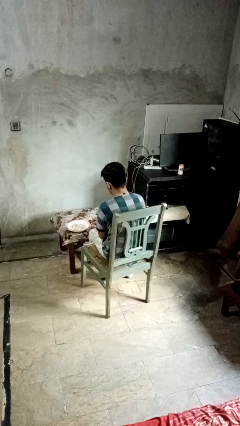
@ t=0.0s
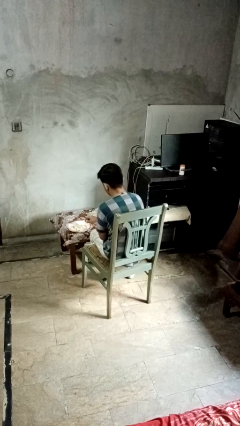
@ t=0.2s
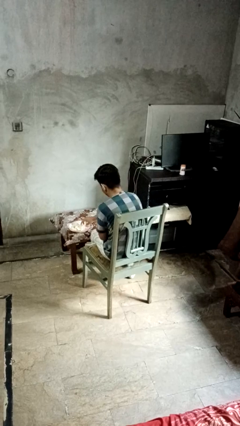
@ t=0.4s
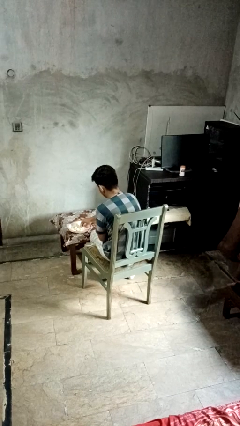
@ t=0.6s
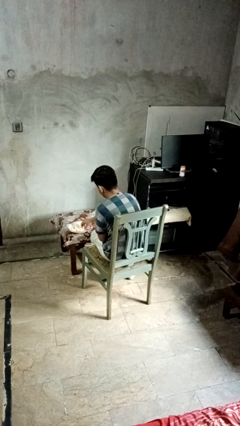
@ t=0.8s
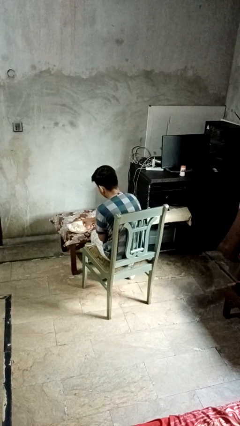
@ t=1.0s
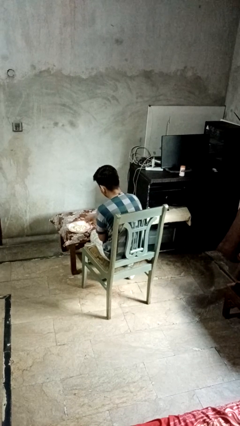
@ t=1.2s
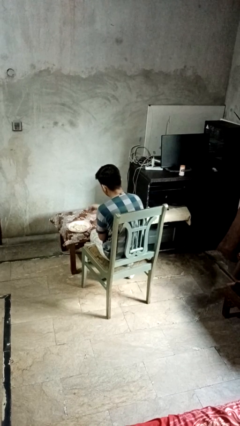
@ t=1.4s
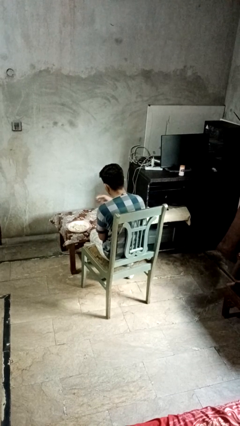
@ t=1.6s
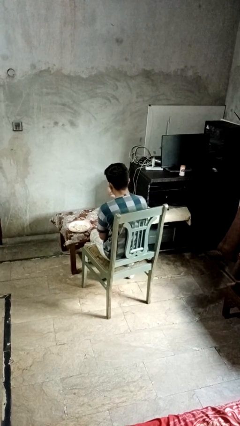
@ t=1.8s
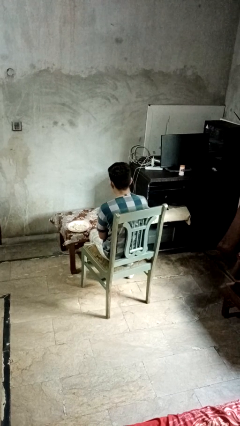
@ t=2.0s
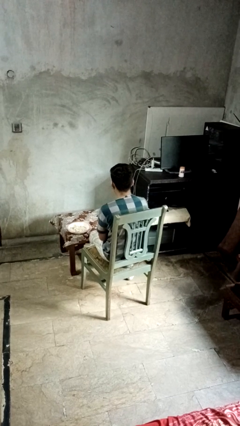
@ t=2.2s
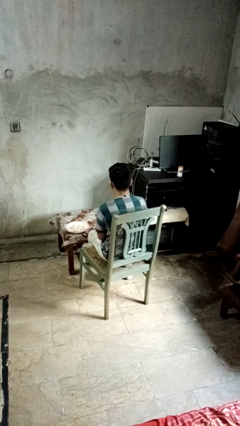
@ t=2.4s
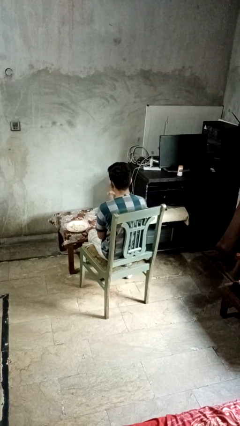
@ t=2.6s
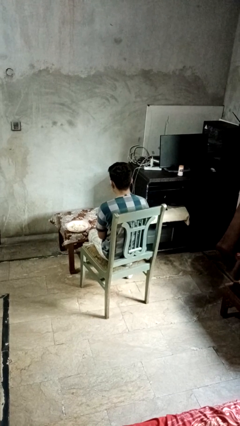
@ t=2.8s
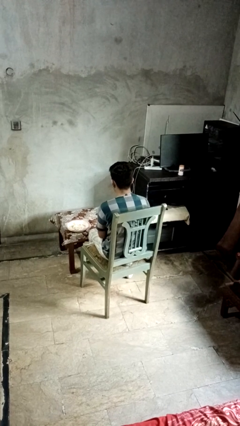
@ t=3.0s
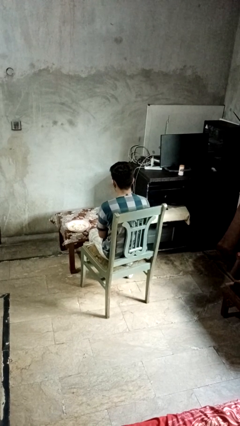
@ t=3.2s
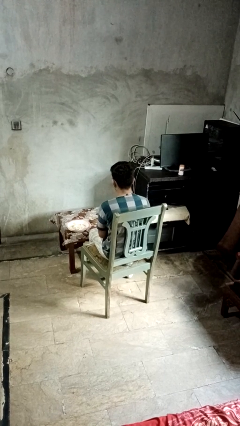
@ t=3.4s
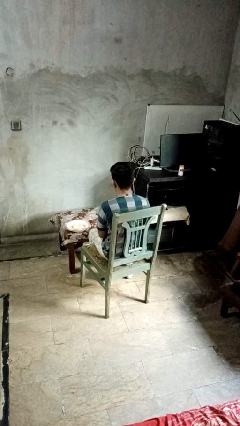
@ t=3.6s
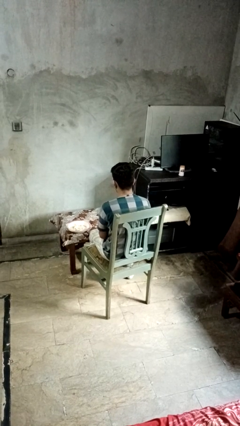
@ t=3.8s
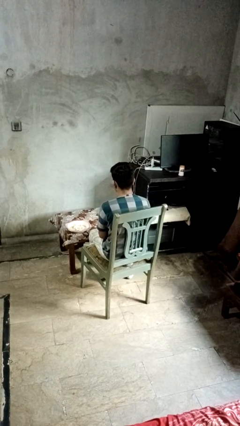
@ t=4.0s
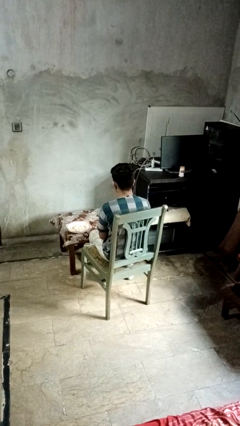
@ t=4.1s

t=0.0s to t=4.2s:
person eats with hands

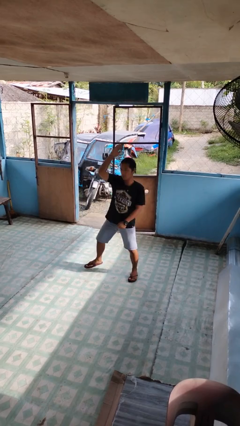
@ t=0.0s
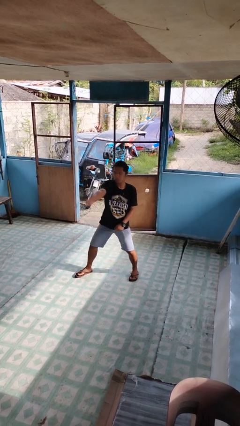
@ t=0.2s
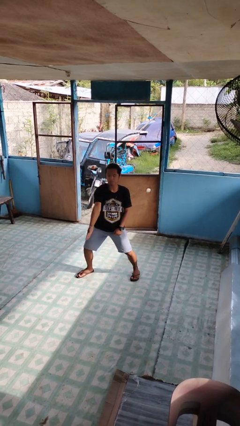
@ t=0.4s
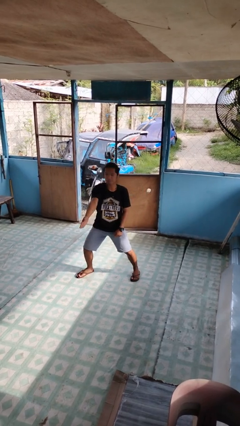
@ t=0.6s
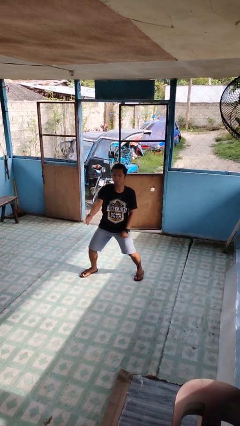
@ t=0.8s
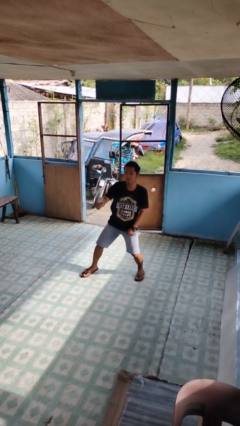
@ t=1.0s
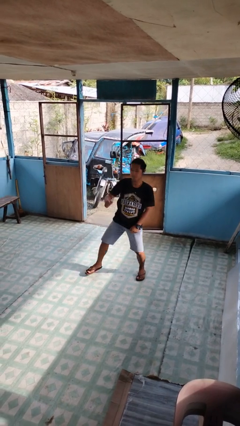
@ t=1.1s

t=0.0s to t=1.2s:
person karate chop

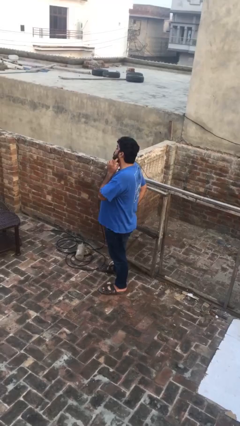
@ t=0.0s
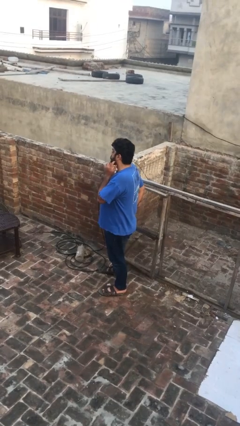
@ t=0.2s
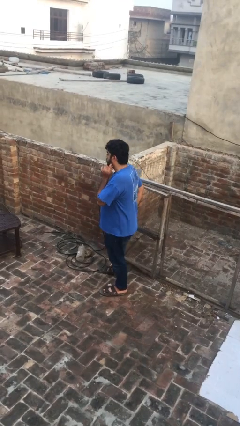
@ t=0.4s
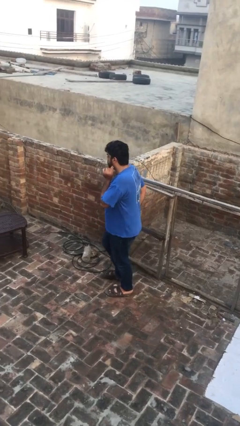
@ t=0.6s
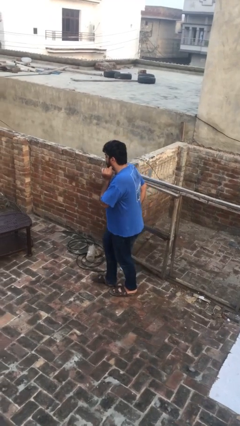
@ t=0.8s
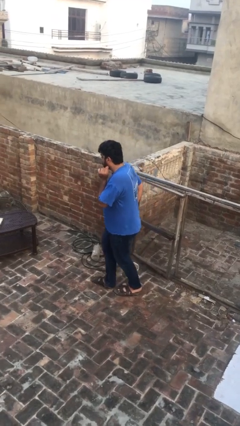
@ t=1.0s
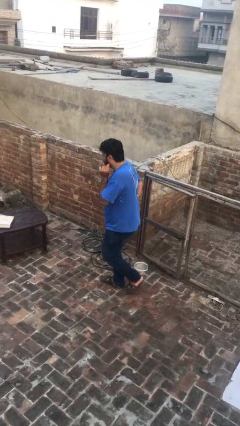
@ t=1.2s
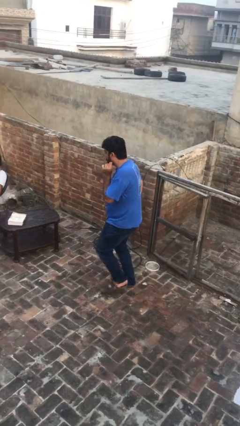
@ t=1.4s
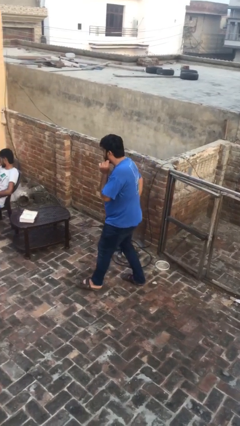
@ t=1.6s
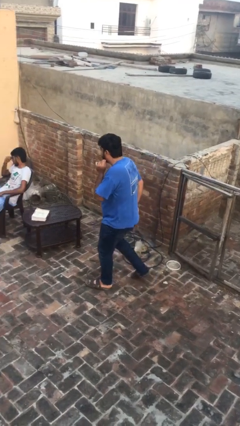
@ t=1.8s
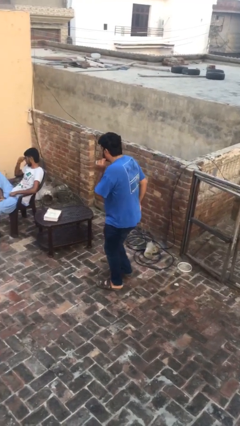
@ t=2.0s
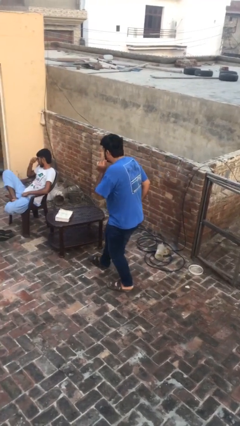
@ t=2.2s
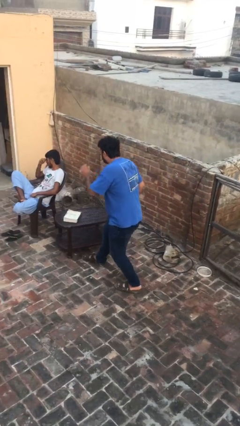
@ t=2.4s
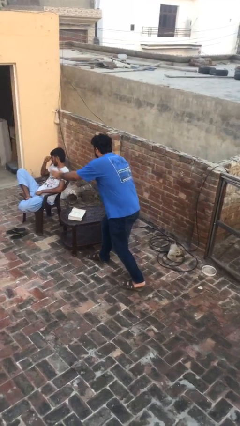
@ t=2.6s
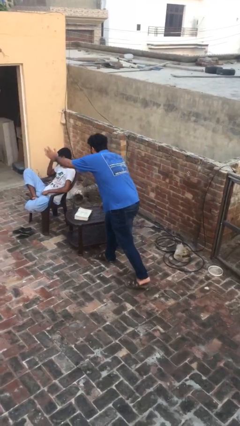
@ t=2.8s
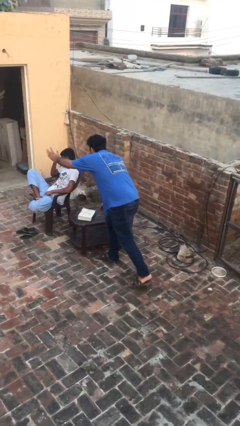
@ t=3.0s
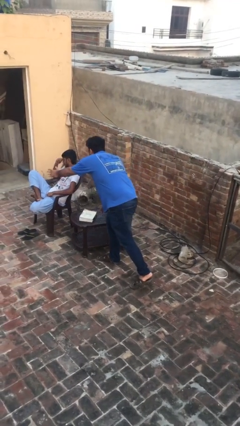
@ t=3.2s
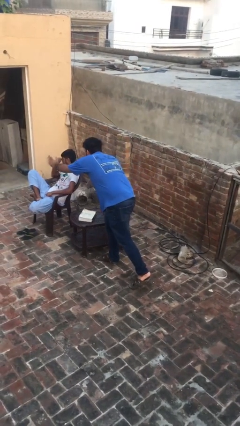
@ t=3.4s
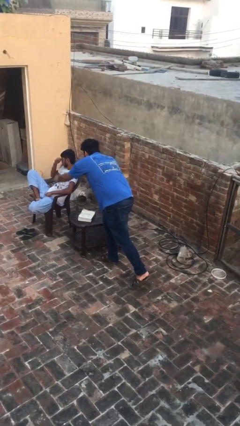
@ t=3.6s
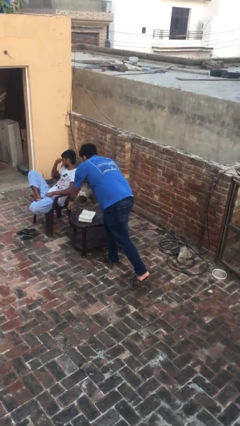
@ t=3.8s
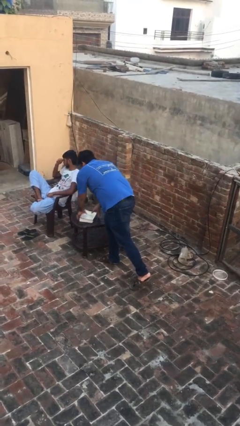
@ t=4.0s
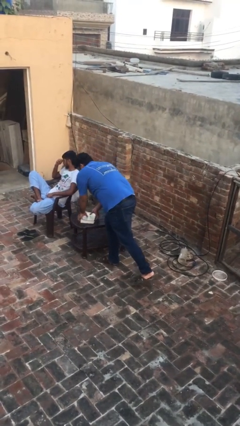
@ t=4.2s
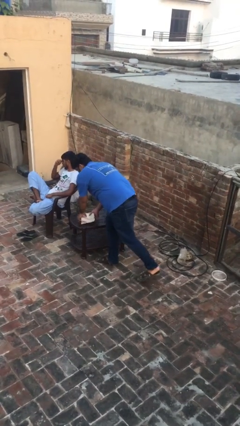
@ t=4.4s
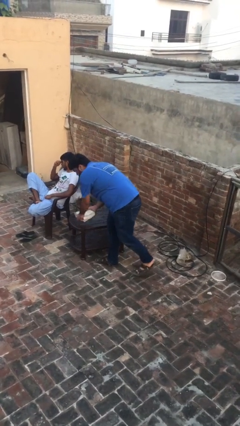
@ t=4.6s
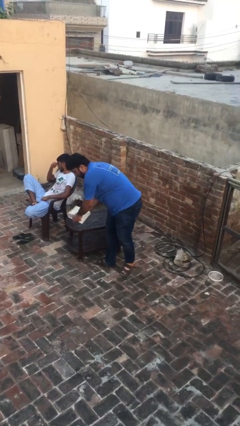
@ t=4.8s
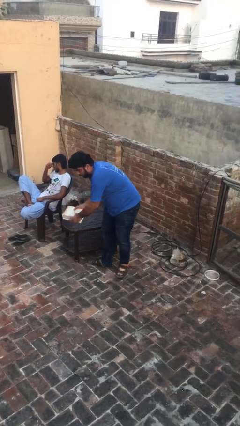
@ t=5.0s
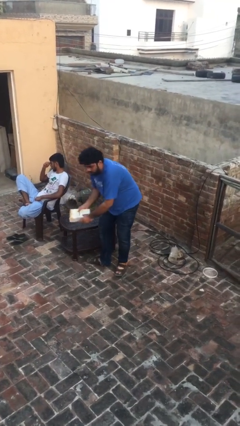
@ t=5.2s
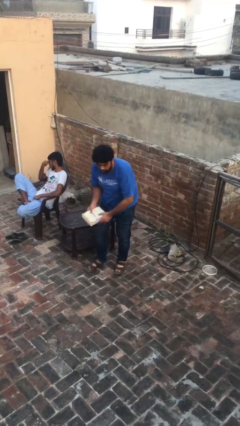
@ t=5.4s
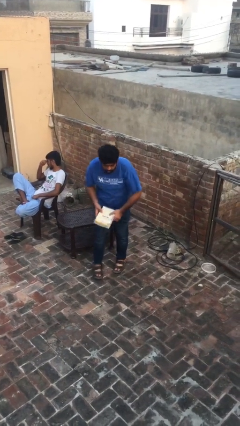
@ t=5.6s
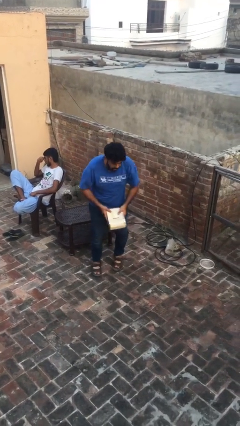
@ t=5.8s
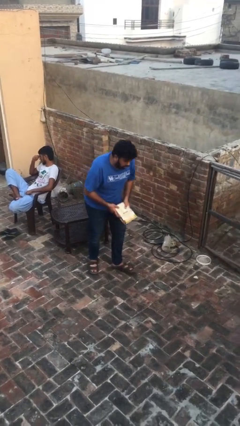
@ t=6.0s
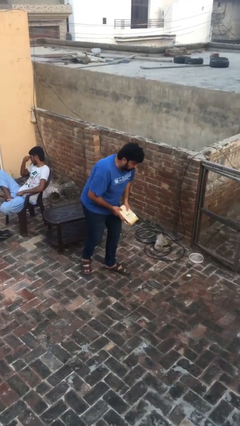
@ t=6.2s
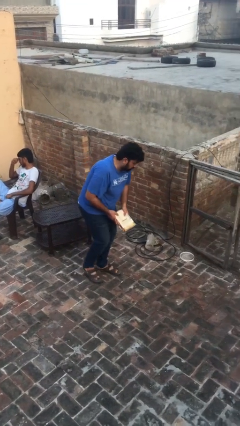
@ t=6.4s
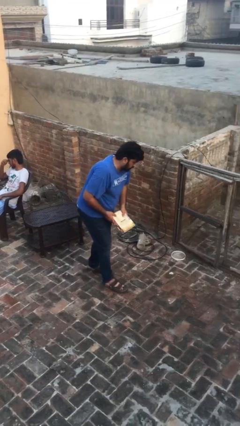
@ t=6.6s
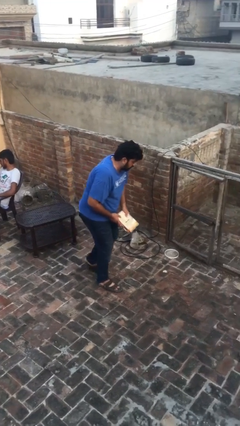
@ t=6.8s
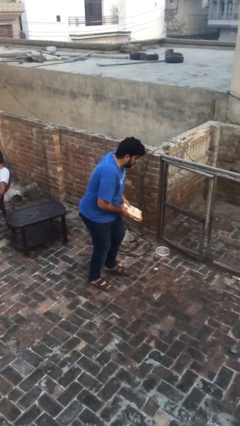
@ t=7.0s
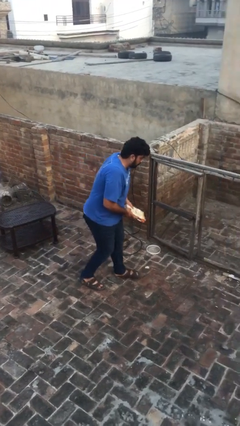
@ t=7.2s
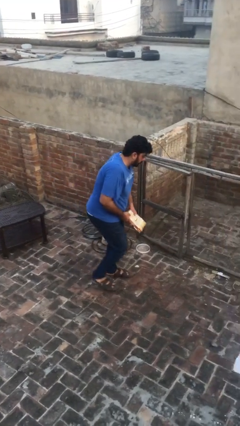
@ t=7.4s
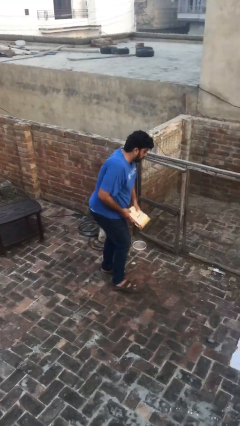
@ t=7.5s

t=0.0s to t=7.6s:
person steals object from person

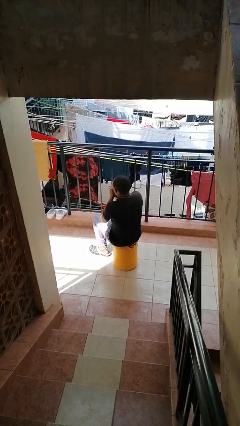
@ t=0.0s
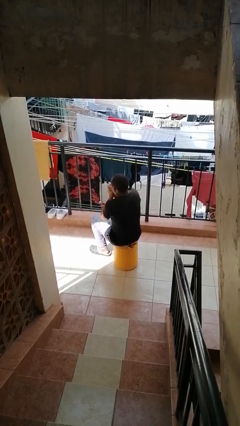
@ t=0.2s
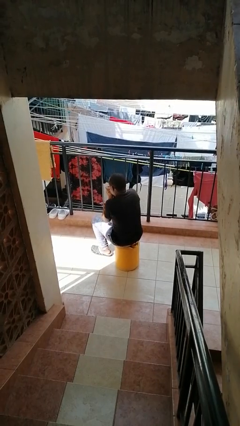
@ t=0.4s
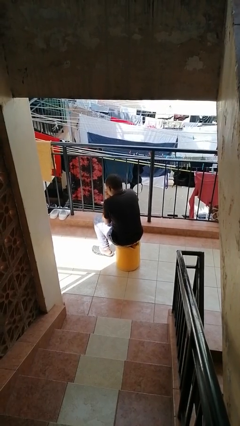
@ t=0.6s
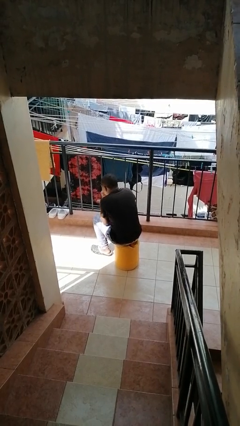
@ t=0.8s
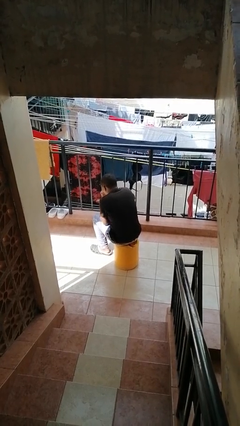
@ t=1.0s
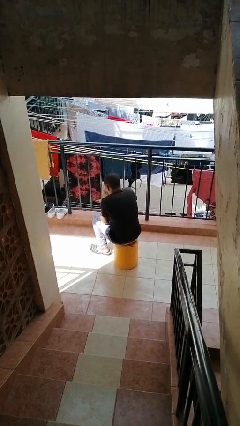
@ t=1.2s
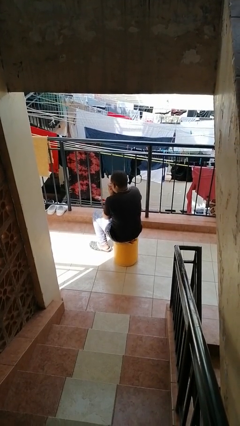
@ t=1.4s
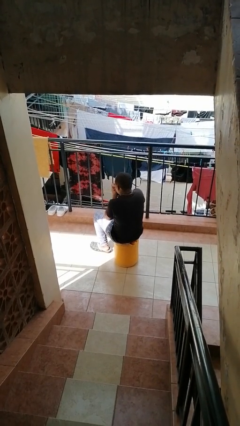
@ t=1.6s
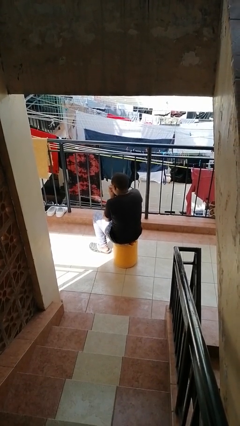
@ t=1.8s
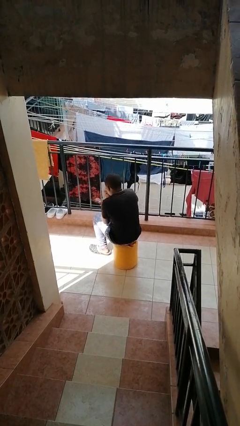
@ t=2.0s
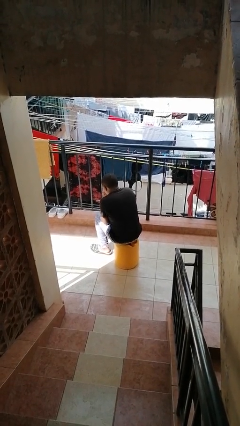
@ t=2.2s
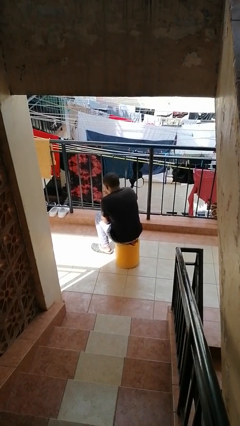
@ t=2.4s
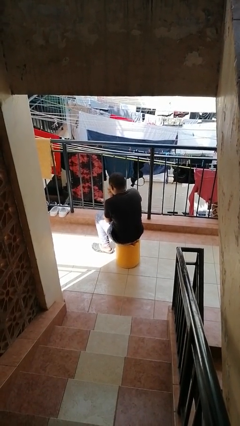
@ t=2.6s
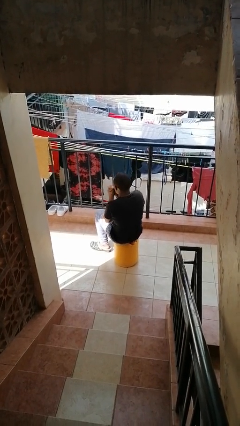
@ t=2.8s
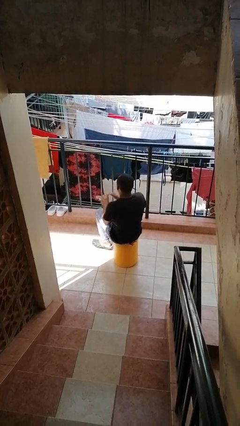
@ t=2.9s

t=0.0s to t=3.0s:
person blows into hands

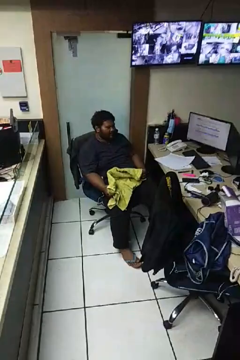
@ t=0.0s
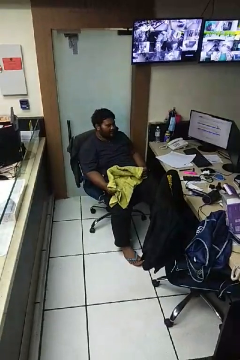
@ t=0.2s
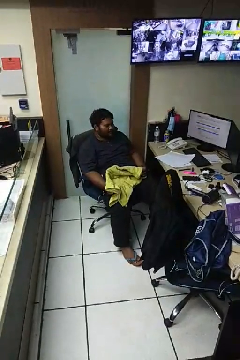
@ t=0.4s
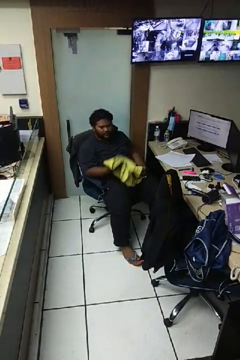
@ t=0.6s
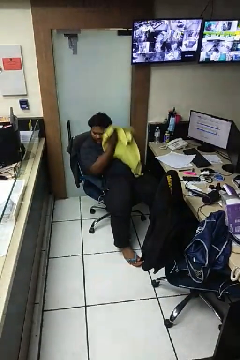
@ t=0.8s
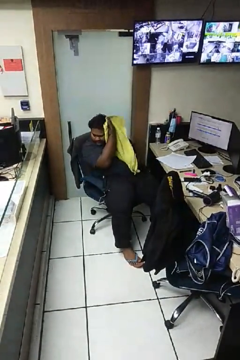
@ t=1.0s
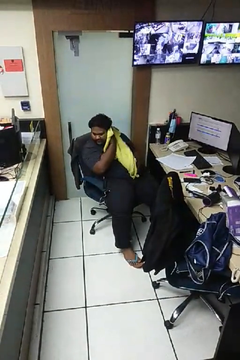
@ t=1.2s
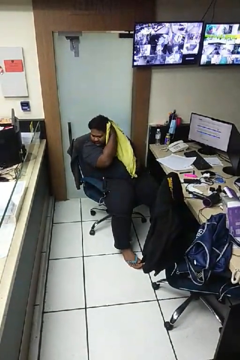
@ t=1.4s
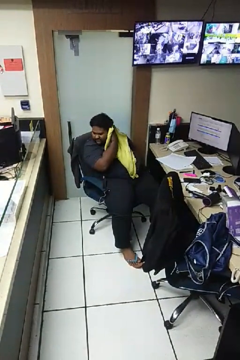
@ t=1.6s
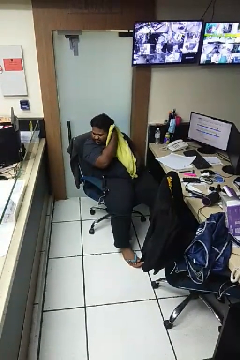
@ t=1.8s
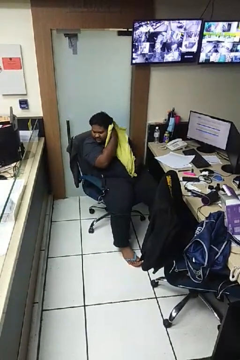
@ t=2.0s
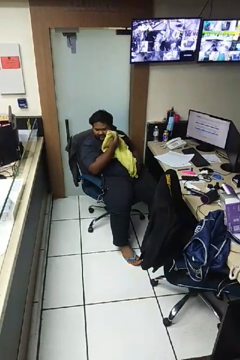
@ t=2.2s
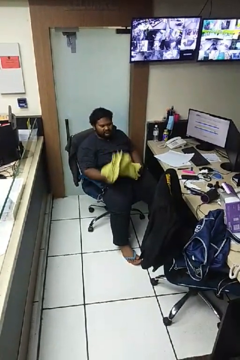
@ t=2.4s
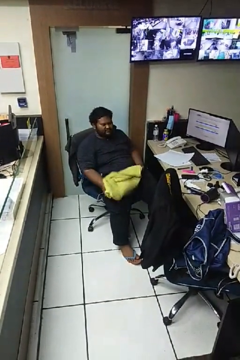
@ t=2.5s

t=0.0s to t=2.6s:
person dries hair with towel
